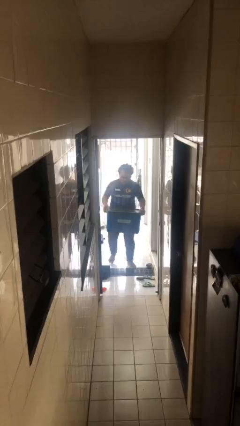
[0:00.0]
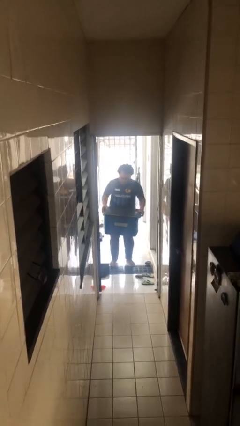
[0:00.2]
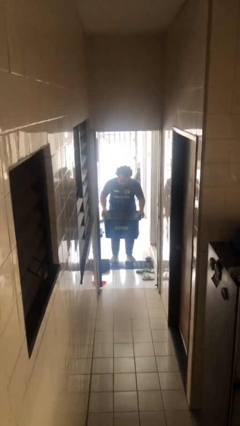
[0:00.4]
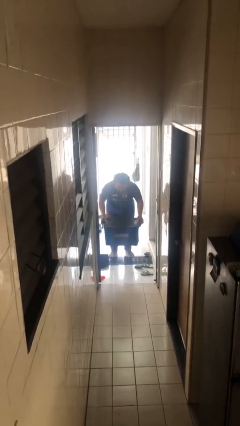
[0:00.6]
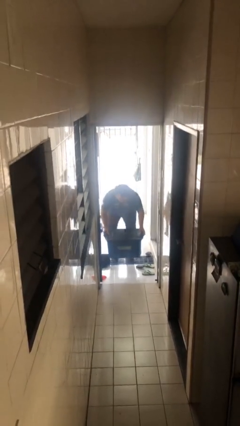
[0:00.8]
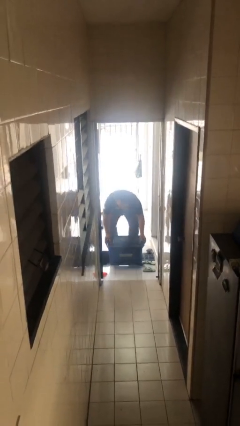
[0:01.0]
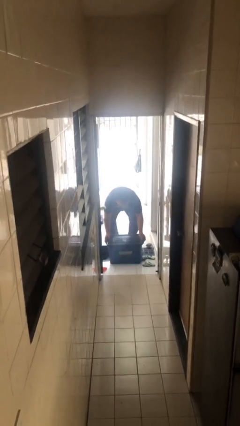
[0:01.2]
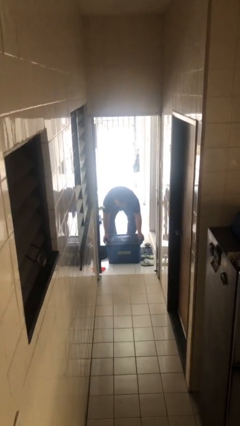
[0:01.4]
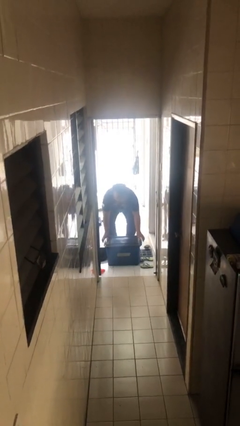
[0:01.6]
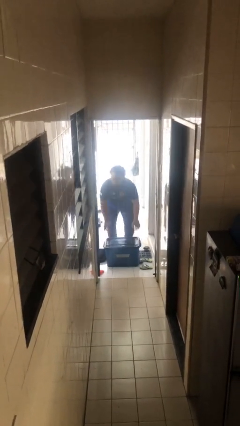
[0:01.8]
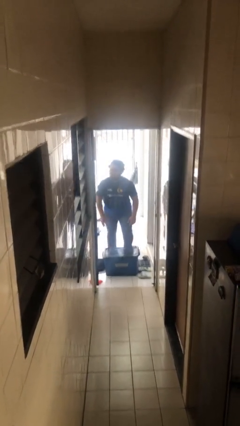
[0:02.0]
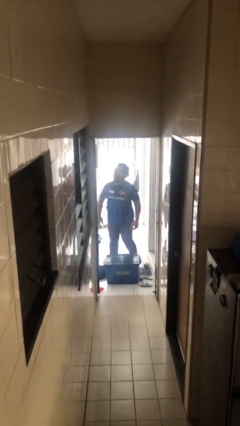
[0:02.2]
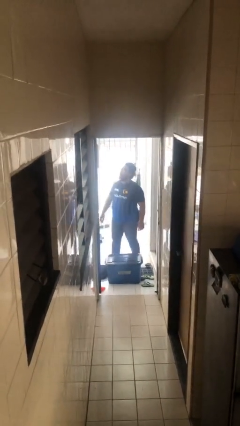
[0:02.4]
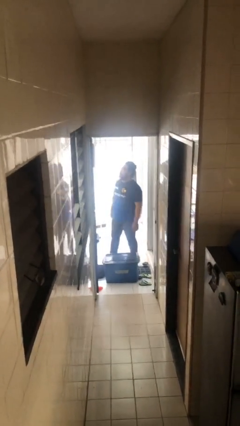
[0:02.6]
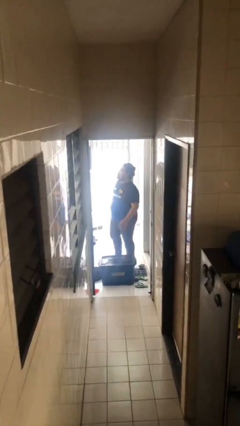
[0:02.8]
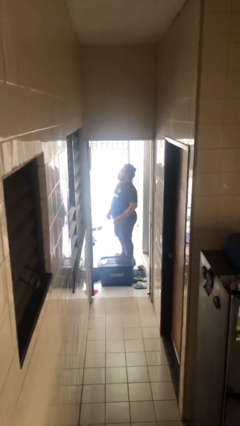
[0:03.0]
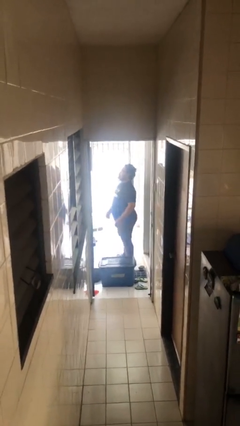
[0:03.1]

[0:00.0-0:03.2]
person puts down object on floor

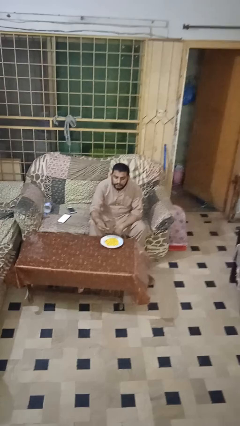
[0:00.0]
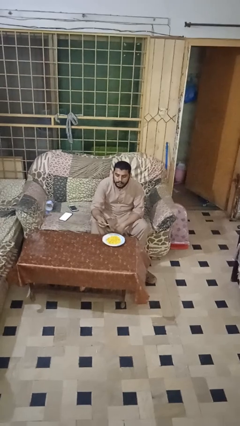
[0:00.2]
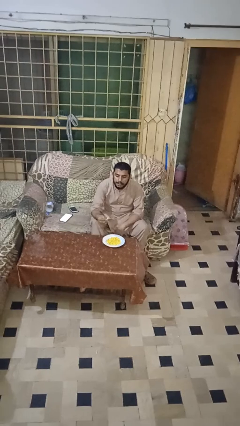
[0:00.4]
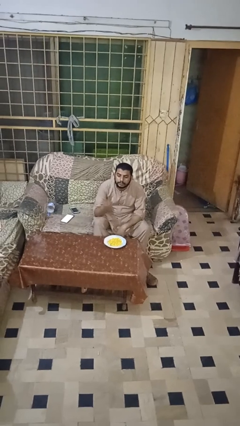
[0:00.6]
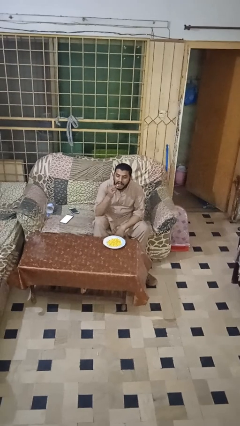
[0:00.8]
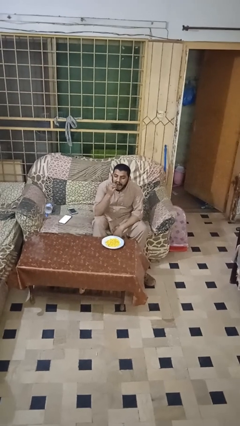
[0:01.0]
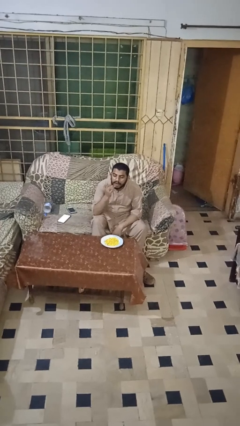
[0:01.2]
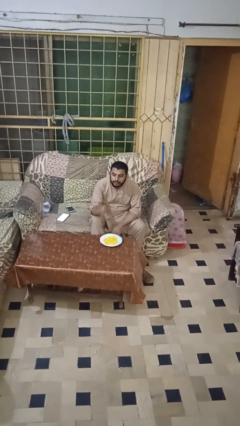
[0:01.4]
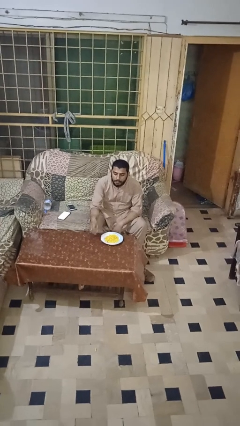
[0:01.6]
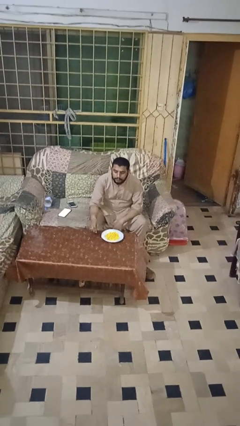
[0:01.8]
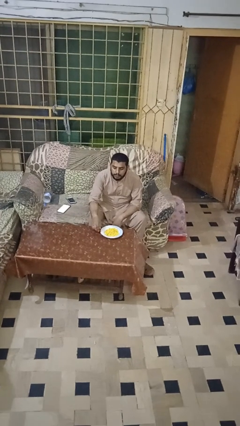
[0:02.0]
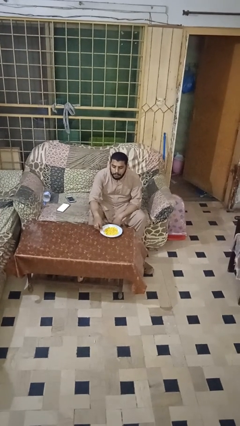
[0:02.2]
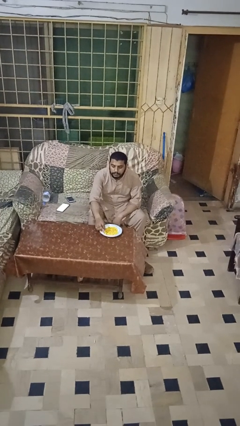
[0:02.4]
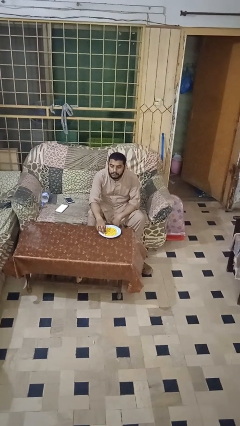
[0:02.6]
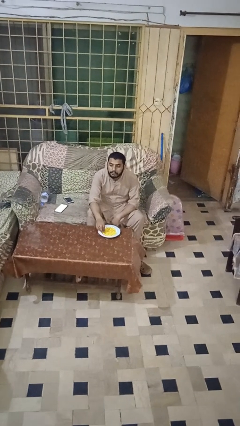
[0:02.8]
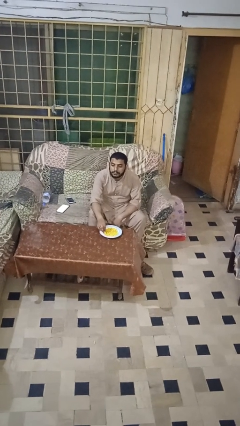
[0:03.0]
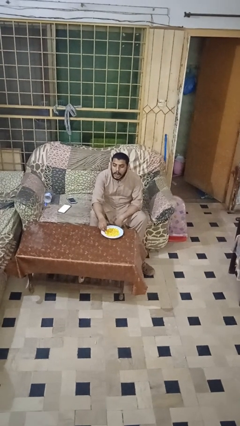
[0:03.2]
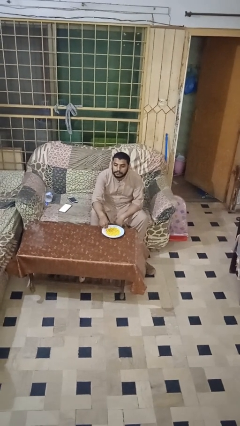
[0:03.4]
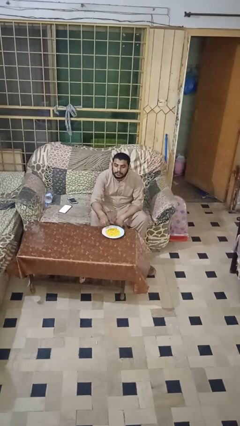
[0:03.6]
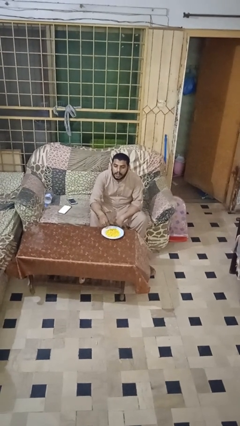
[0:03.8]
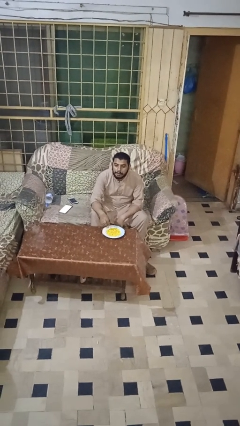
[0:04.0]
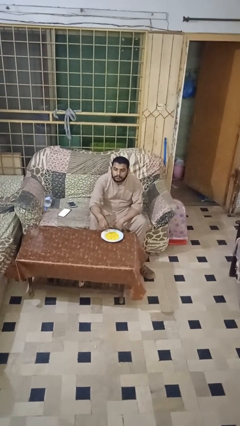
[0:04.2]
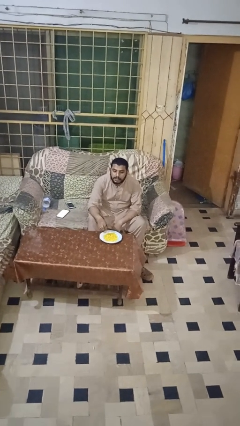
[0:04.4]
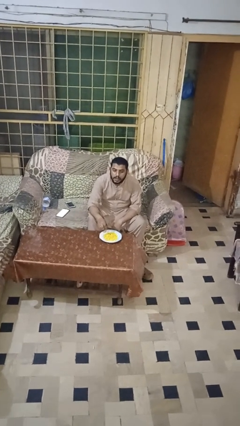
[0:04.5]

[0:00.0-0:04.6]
person eats with hands

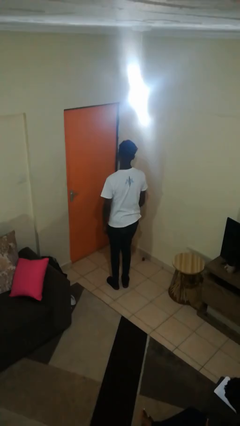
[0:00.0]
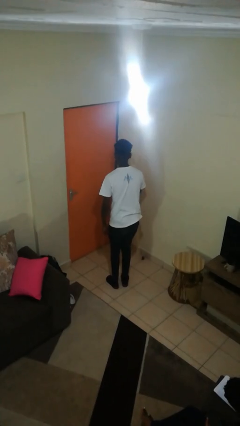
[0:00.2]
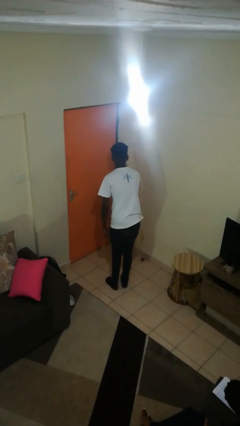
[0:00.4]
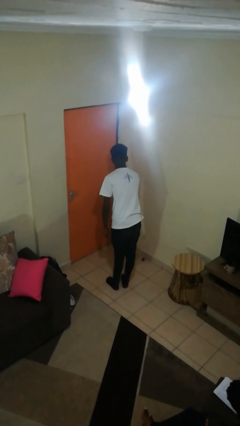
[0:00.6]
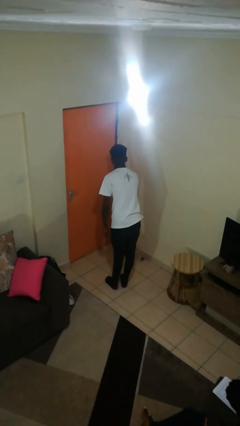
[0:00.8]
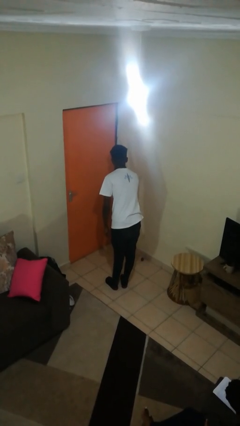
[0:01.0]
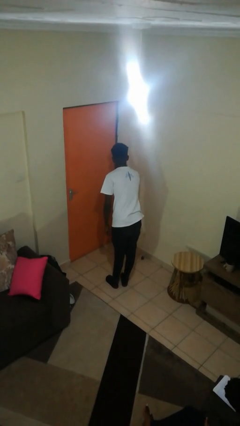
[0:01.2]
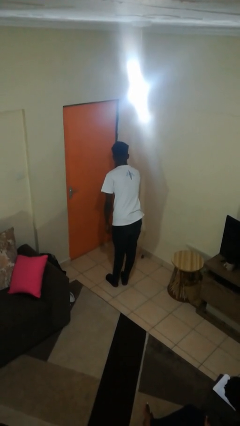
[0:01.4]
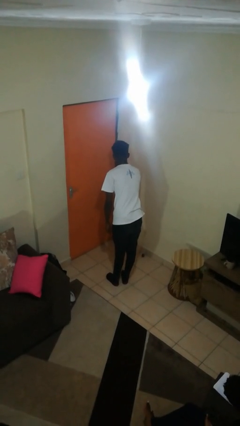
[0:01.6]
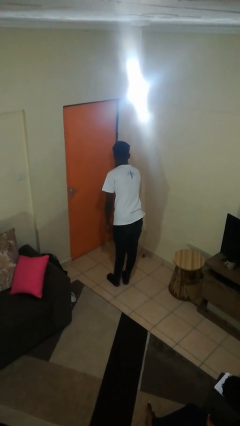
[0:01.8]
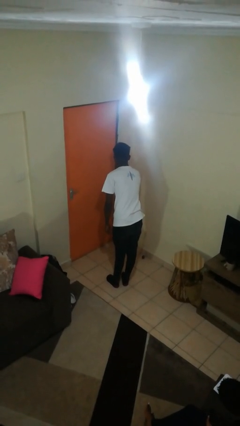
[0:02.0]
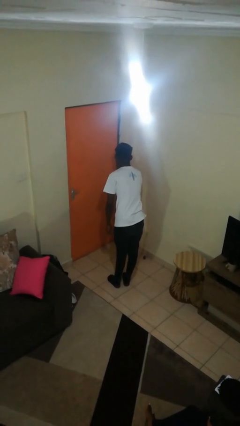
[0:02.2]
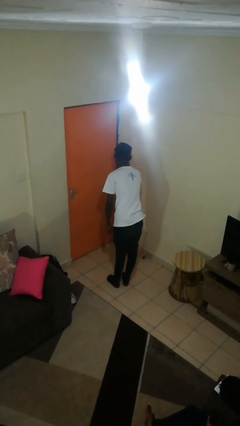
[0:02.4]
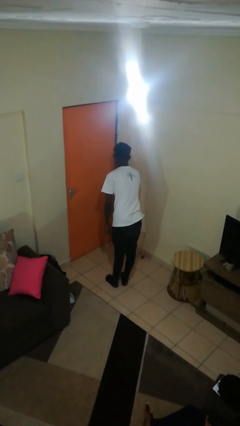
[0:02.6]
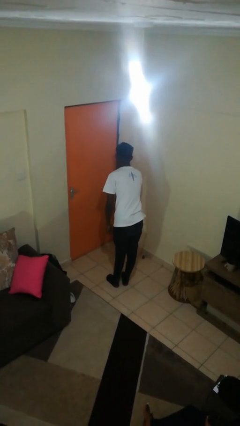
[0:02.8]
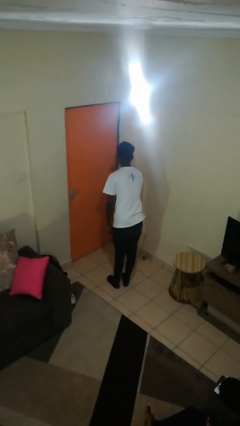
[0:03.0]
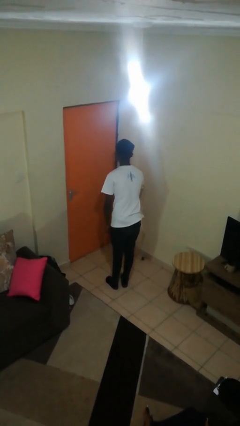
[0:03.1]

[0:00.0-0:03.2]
person gestures watch closely

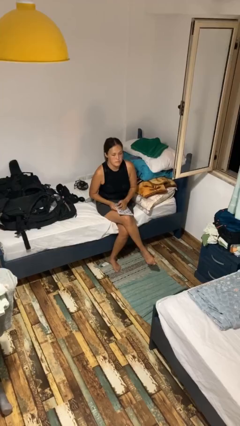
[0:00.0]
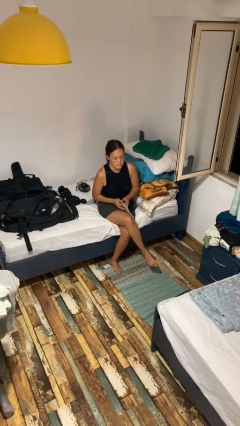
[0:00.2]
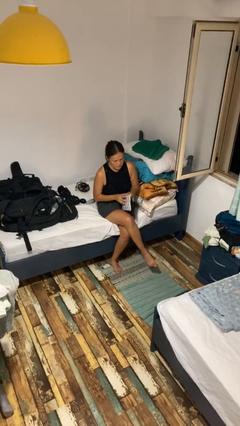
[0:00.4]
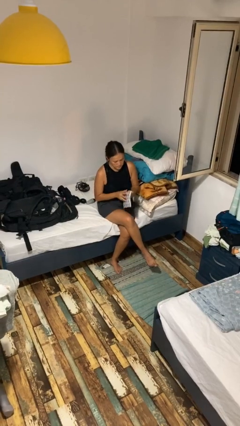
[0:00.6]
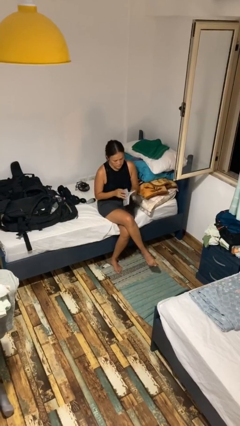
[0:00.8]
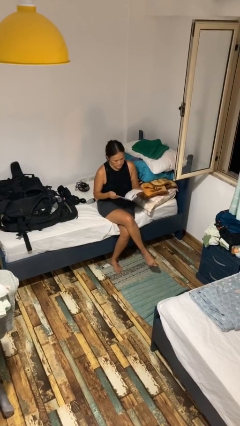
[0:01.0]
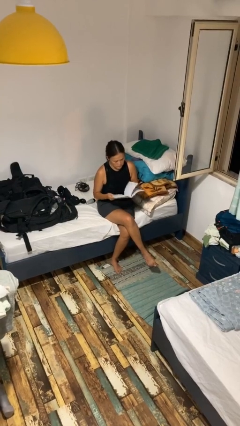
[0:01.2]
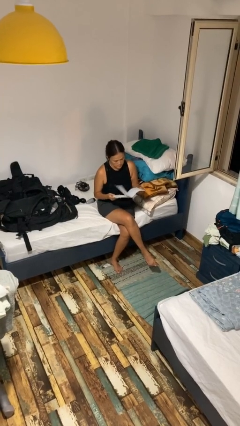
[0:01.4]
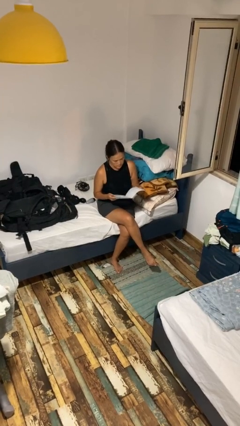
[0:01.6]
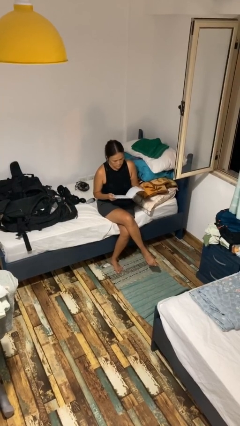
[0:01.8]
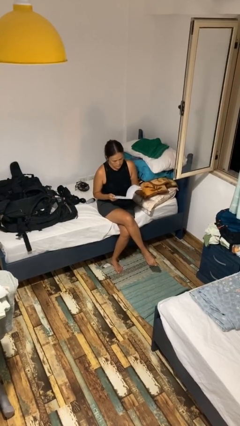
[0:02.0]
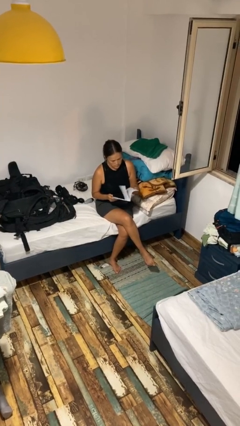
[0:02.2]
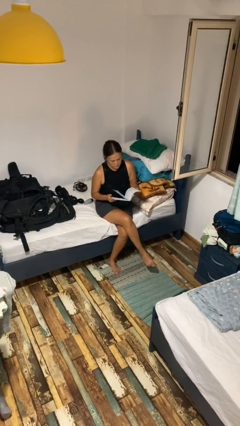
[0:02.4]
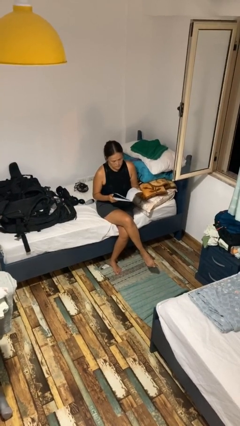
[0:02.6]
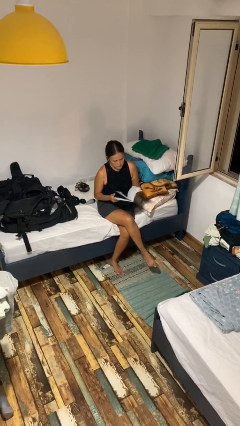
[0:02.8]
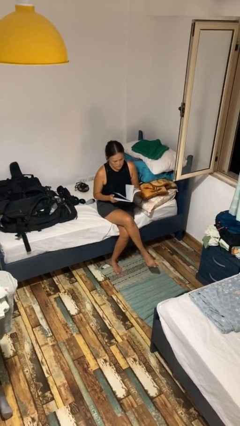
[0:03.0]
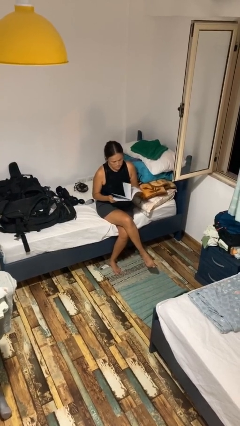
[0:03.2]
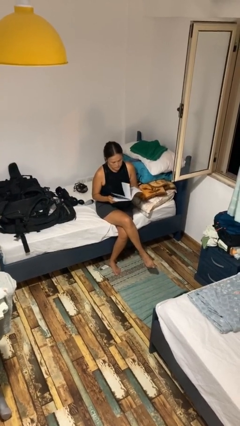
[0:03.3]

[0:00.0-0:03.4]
person reads magazine

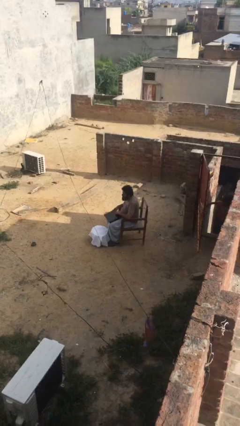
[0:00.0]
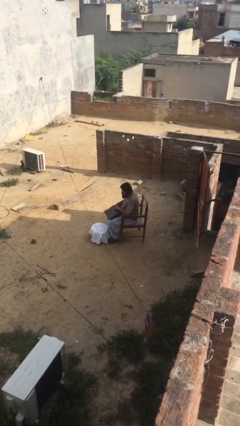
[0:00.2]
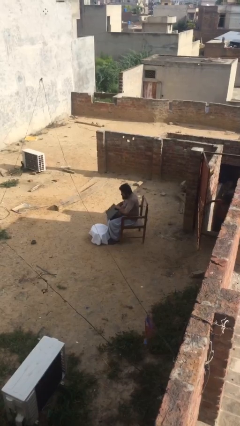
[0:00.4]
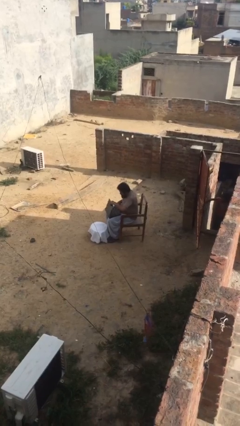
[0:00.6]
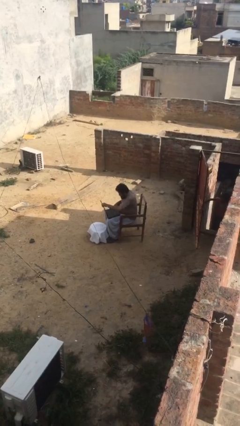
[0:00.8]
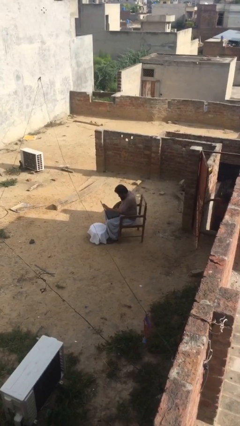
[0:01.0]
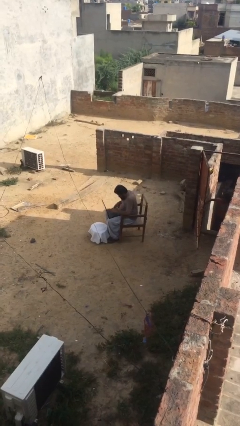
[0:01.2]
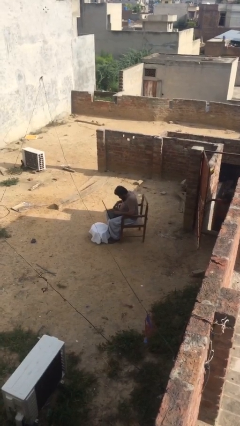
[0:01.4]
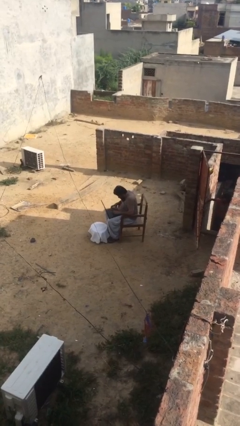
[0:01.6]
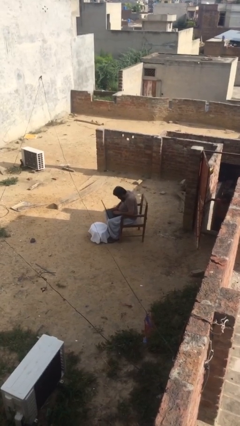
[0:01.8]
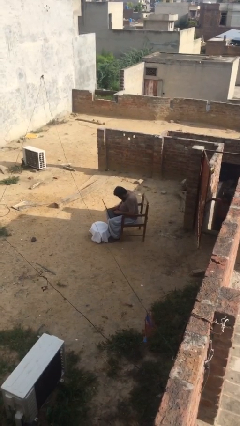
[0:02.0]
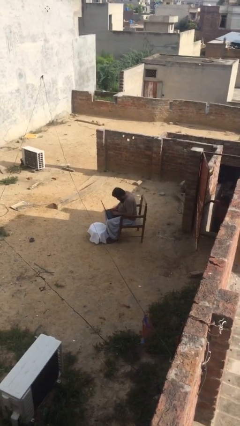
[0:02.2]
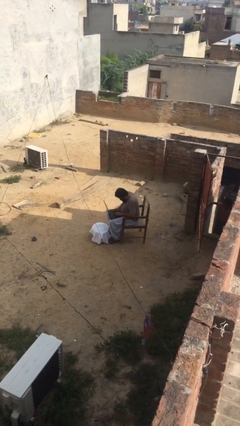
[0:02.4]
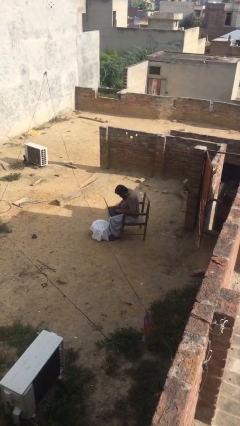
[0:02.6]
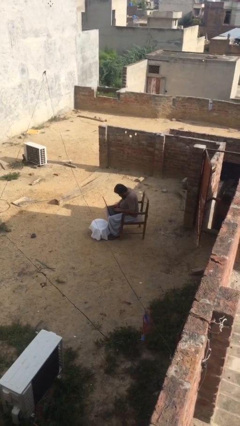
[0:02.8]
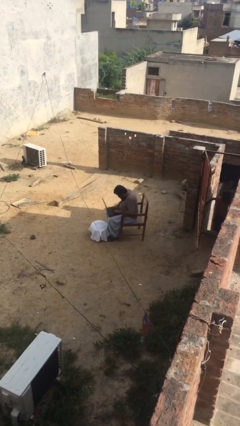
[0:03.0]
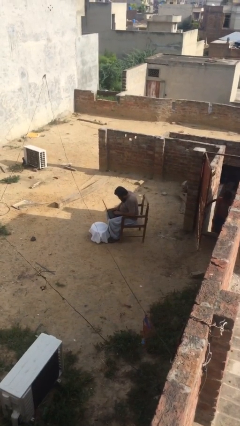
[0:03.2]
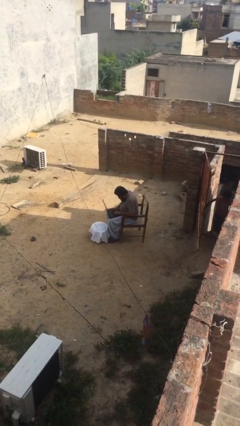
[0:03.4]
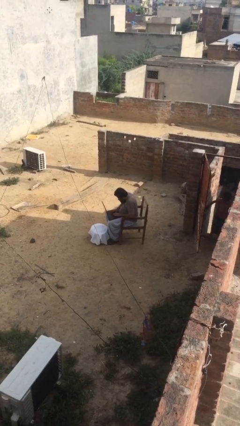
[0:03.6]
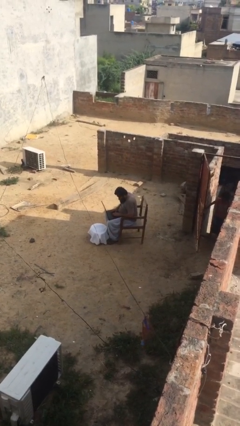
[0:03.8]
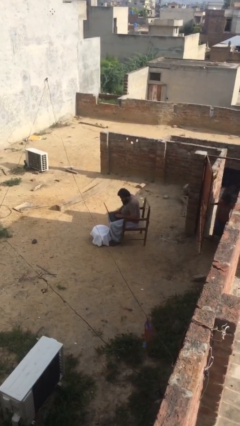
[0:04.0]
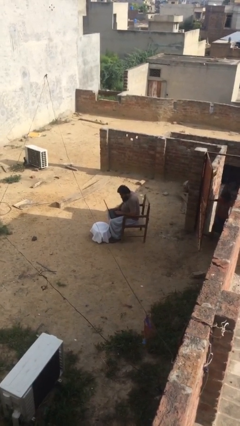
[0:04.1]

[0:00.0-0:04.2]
person interacts with laptop
